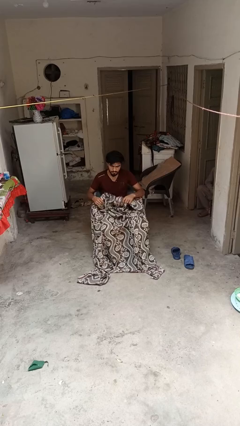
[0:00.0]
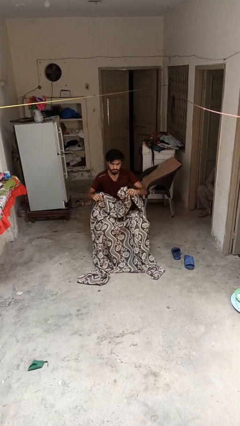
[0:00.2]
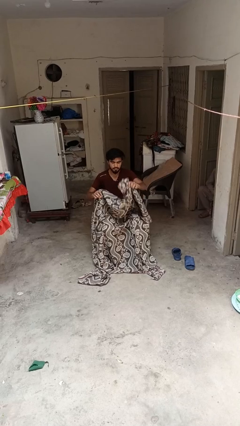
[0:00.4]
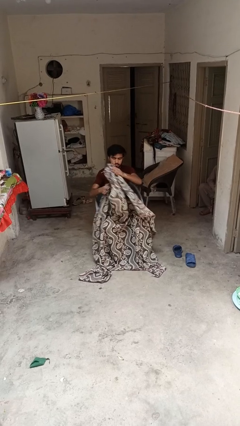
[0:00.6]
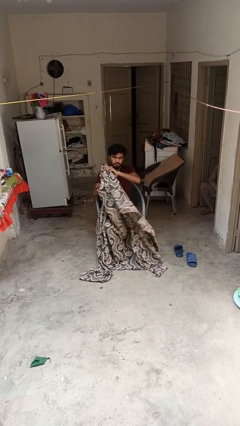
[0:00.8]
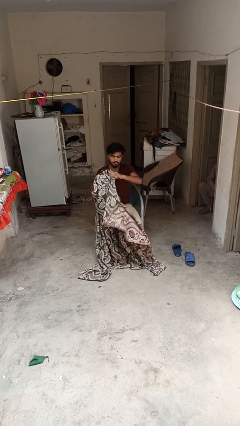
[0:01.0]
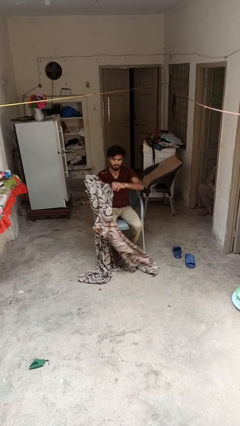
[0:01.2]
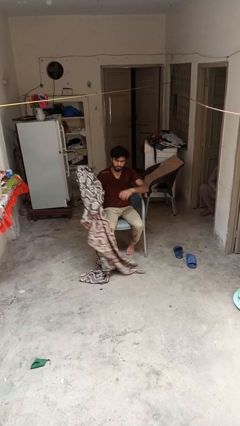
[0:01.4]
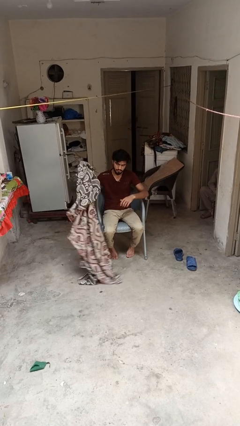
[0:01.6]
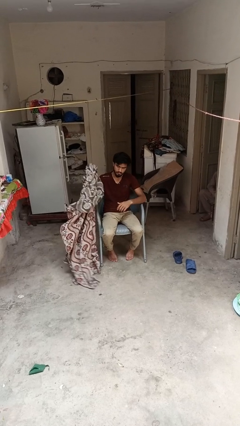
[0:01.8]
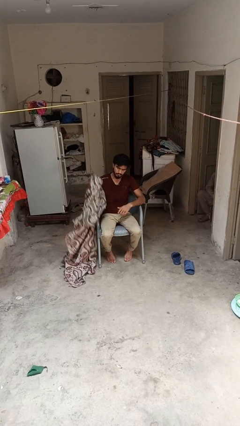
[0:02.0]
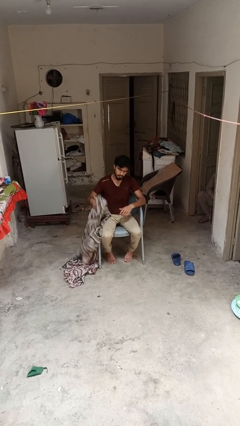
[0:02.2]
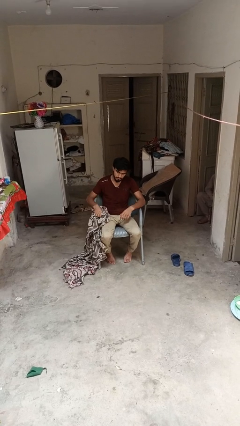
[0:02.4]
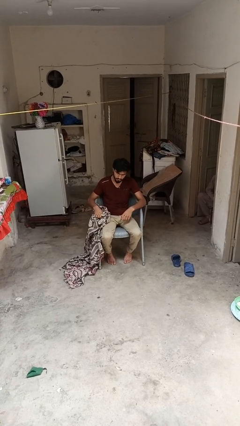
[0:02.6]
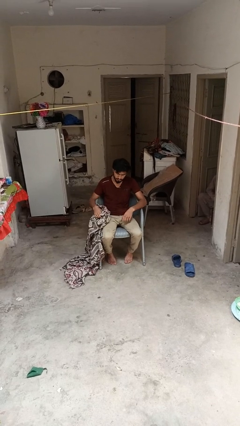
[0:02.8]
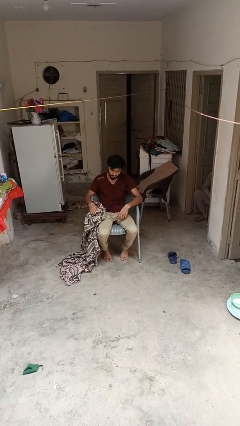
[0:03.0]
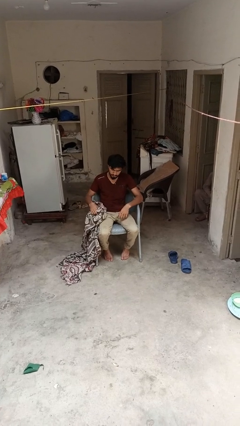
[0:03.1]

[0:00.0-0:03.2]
person uncovers with blanket

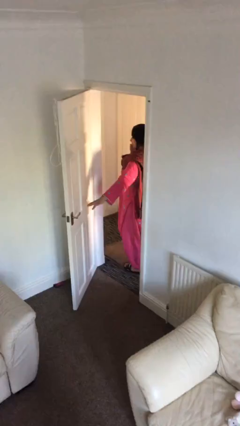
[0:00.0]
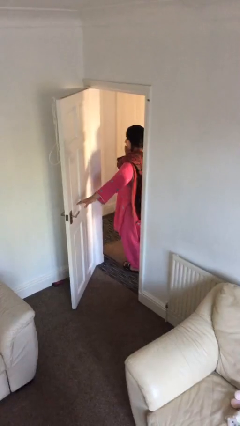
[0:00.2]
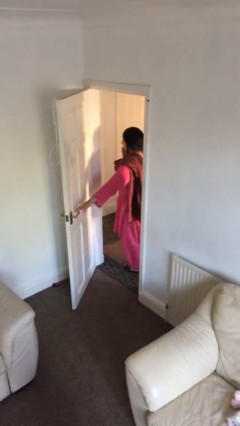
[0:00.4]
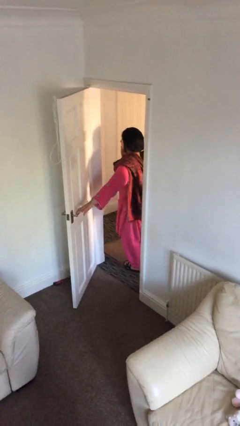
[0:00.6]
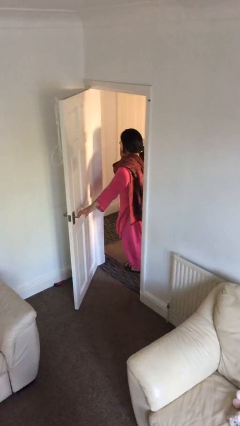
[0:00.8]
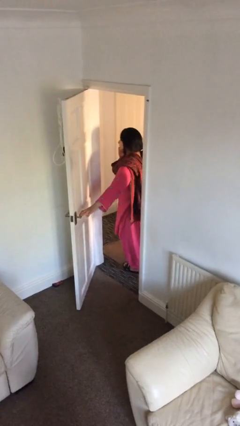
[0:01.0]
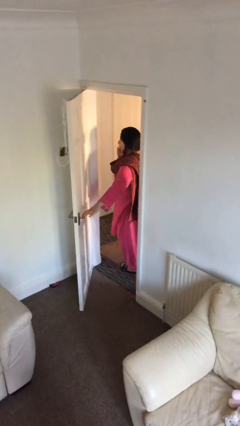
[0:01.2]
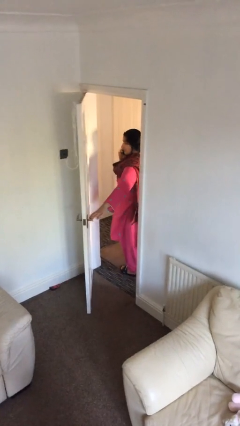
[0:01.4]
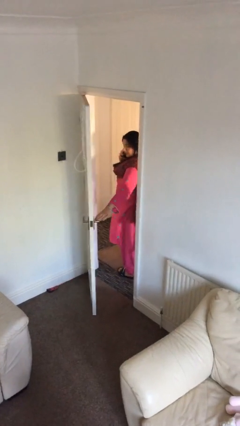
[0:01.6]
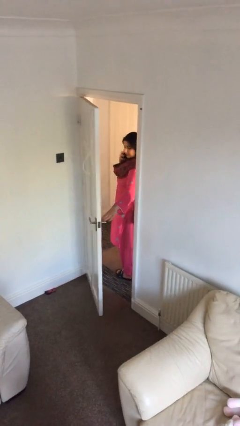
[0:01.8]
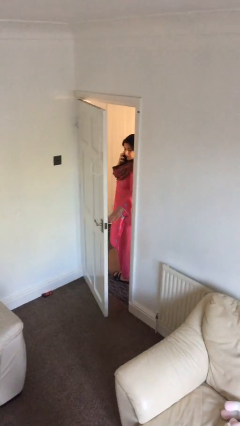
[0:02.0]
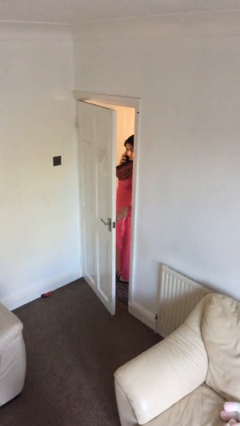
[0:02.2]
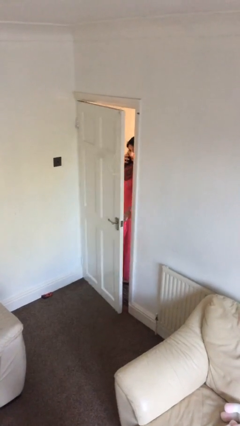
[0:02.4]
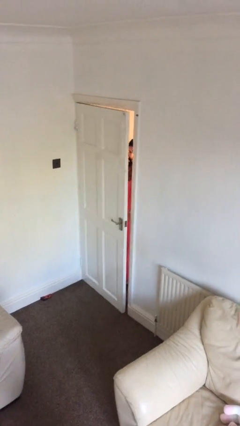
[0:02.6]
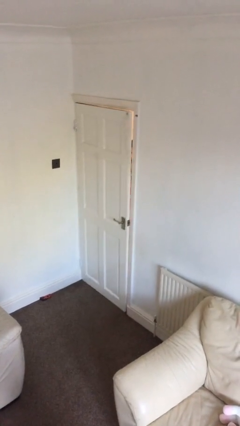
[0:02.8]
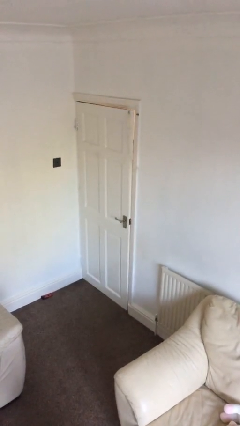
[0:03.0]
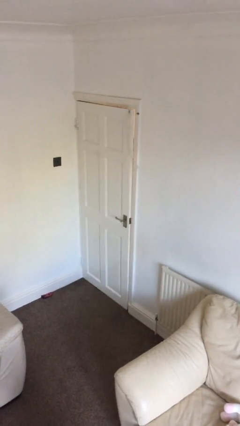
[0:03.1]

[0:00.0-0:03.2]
person closes facility door

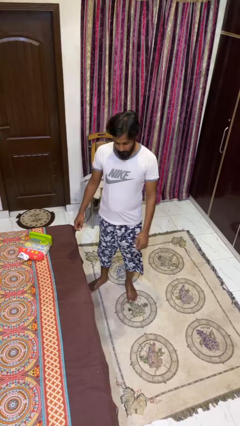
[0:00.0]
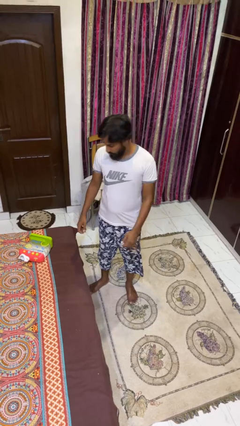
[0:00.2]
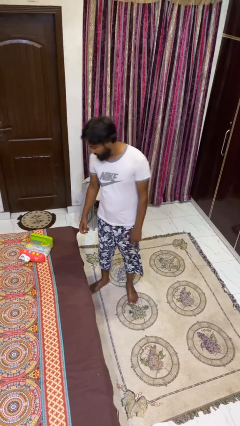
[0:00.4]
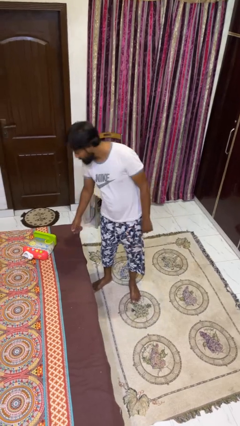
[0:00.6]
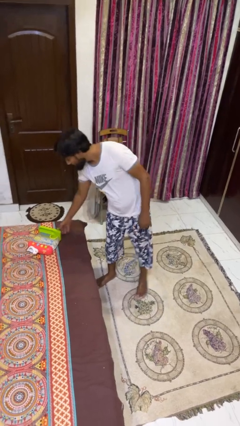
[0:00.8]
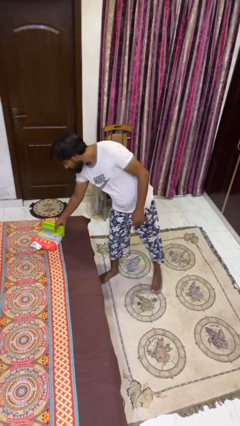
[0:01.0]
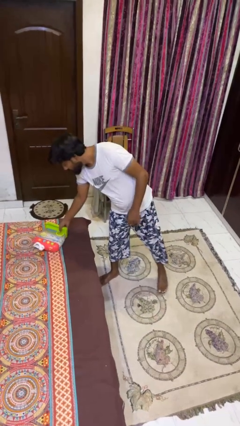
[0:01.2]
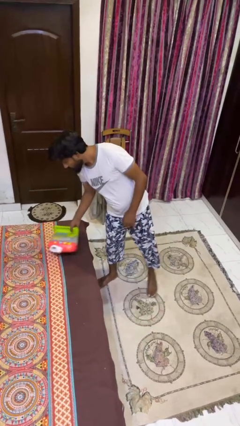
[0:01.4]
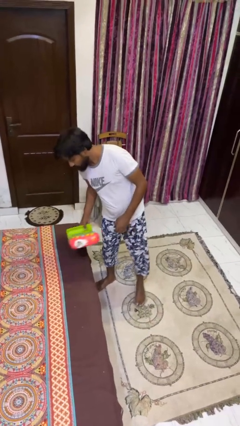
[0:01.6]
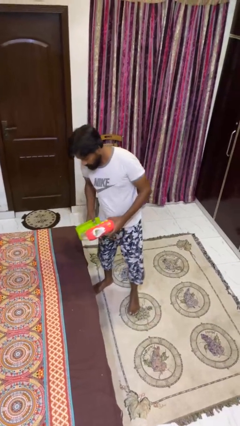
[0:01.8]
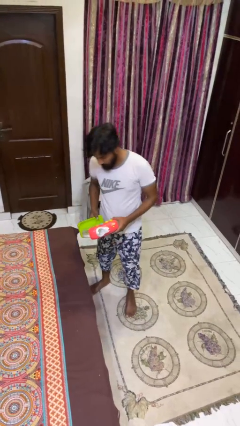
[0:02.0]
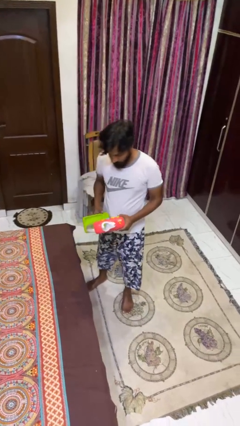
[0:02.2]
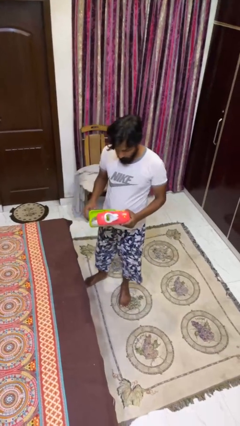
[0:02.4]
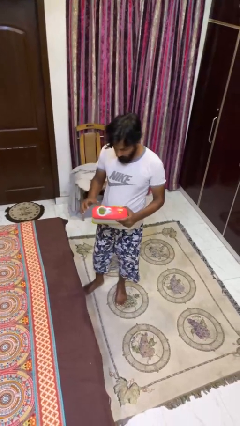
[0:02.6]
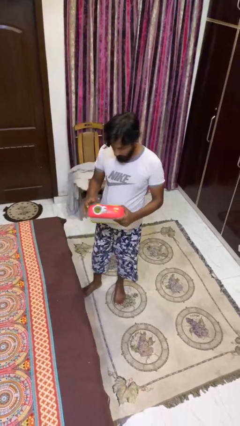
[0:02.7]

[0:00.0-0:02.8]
person picks up object from bed

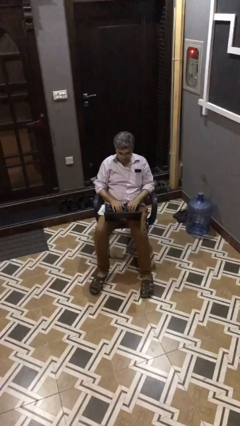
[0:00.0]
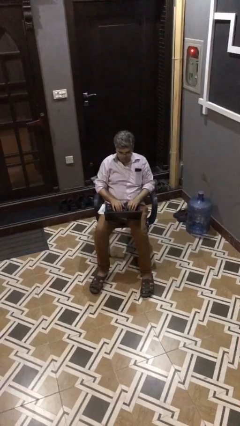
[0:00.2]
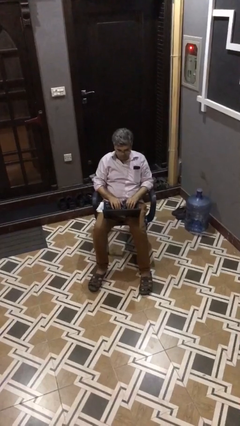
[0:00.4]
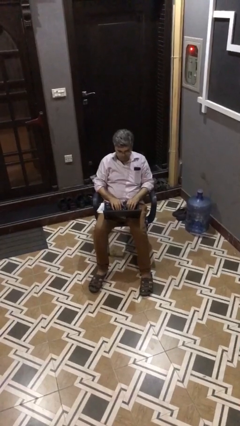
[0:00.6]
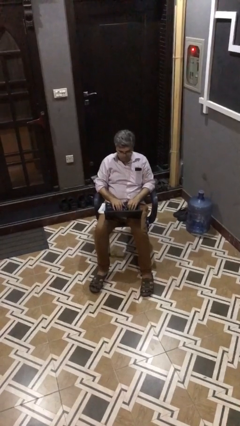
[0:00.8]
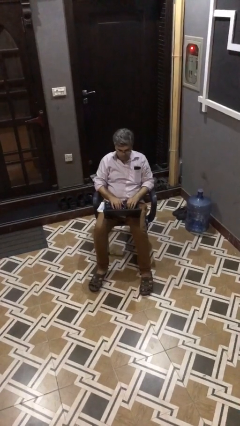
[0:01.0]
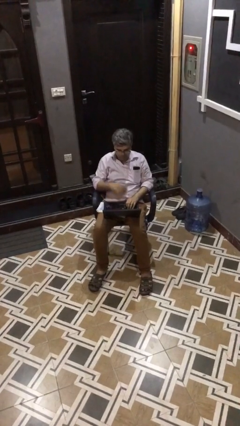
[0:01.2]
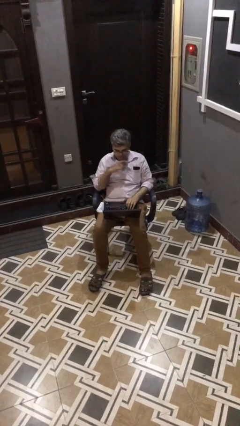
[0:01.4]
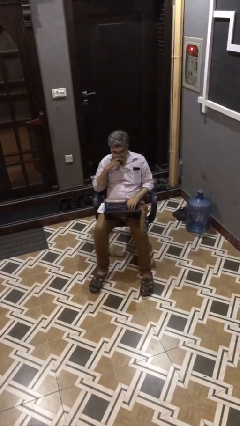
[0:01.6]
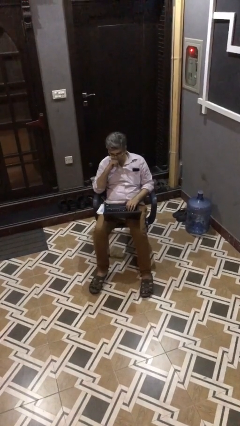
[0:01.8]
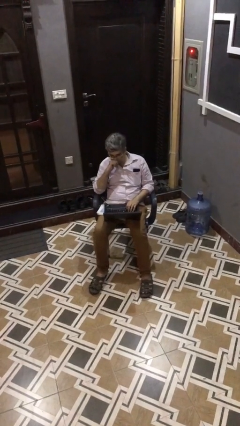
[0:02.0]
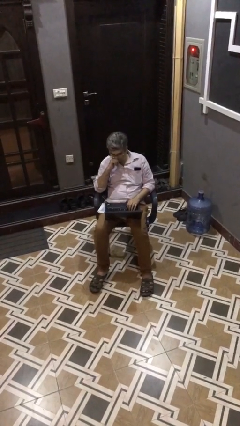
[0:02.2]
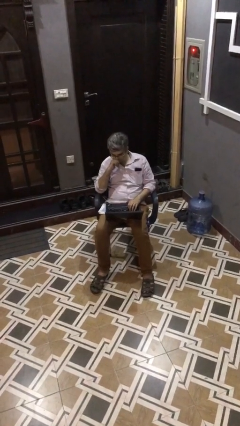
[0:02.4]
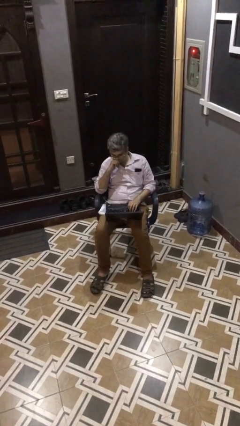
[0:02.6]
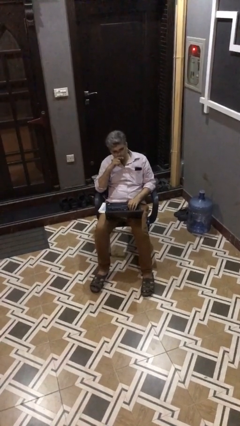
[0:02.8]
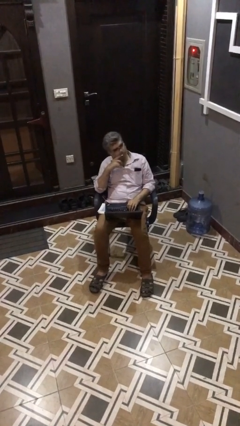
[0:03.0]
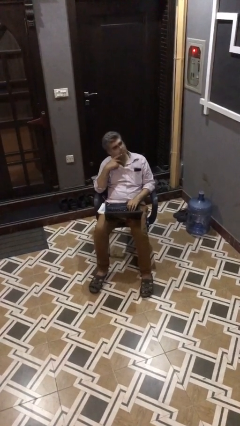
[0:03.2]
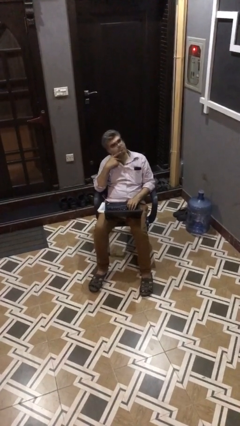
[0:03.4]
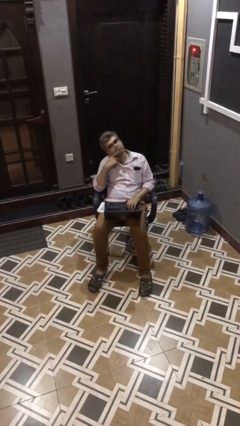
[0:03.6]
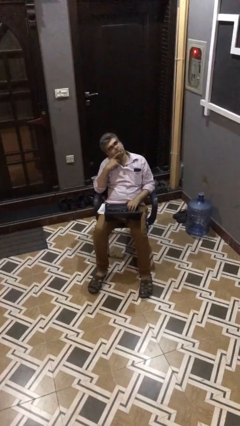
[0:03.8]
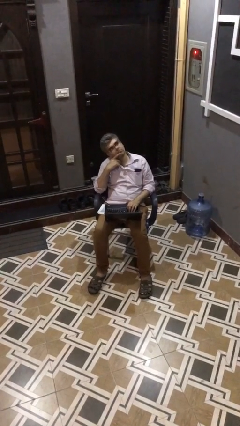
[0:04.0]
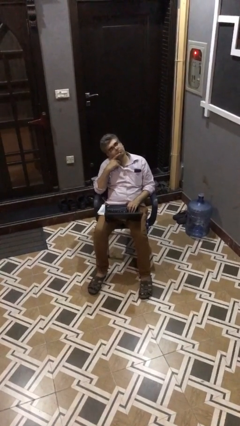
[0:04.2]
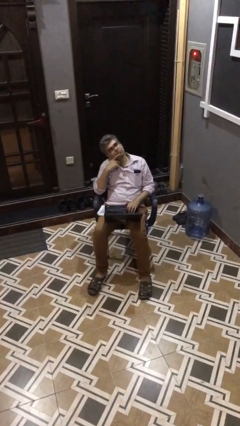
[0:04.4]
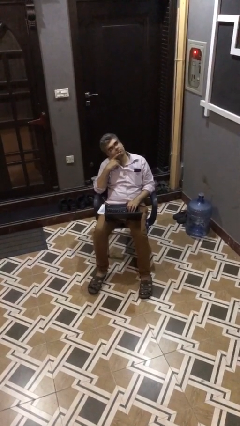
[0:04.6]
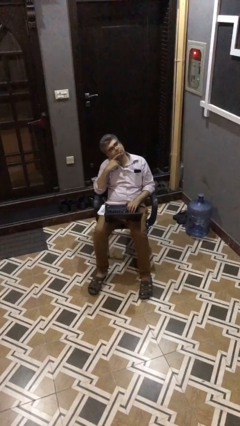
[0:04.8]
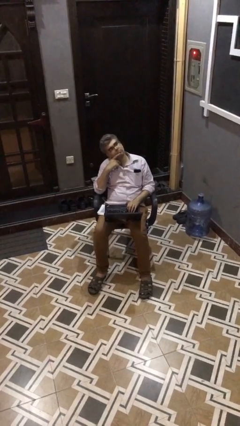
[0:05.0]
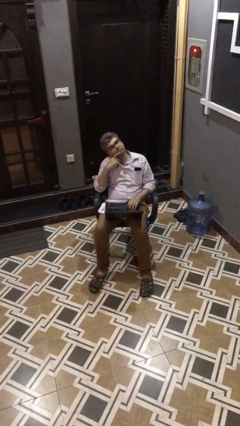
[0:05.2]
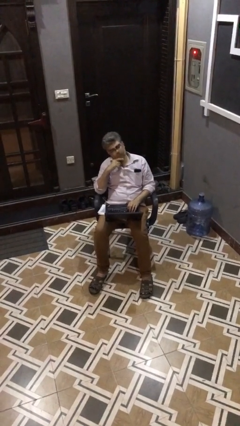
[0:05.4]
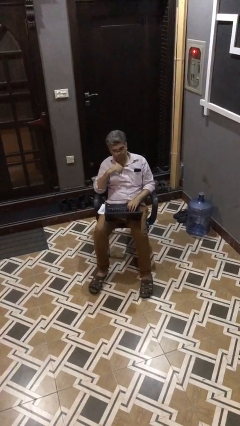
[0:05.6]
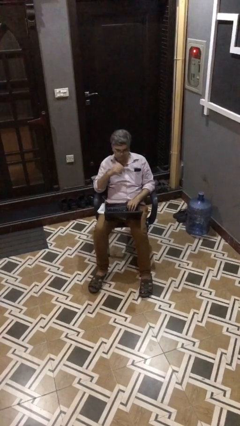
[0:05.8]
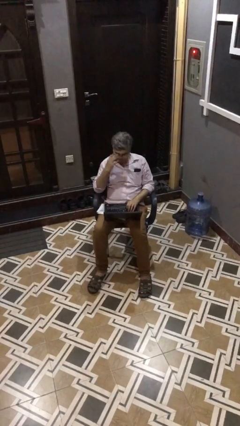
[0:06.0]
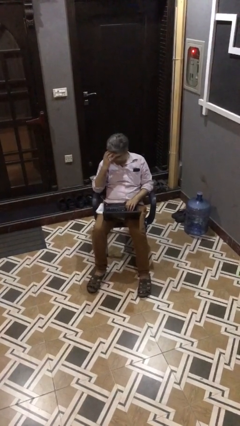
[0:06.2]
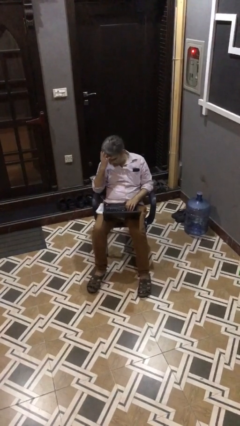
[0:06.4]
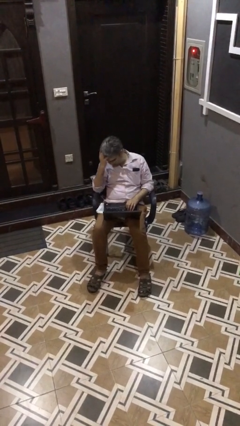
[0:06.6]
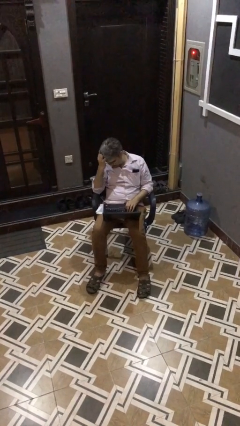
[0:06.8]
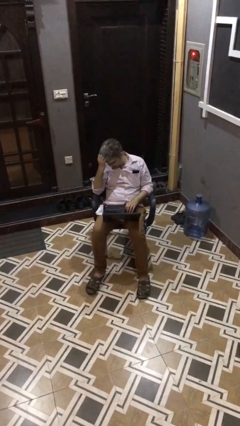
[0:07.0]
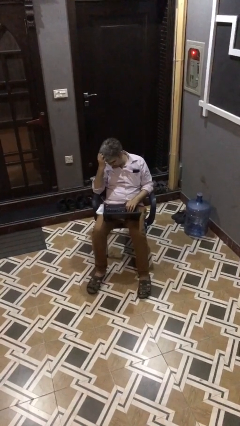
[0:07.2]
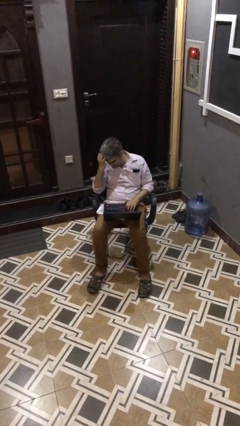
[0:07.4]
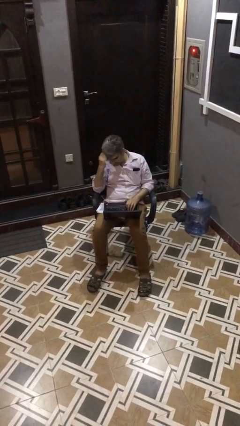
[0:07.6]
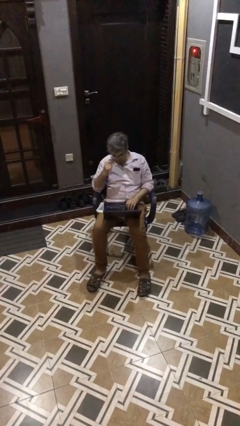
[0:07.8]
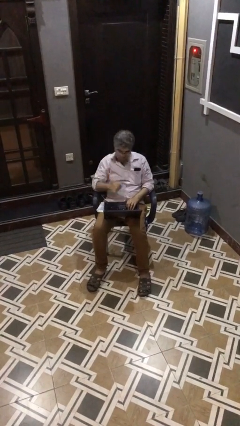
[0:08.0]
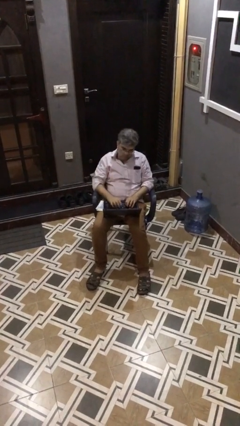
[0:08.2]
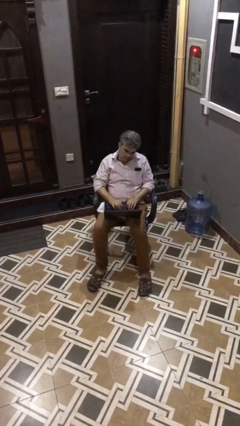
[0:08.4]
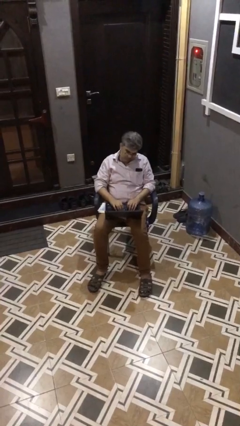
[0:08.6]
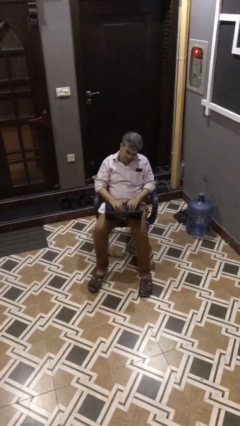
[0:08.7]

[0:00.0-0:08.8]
person interacts with laptop
